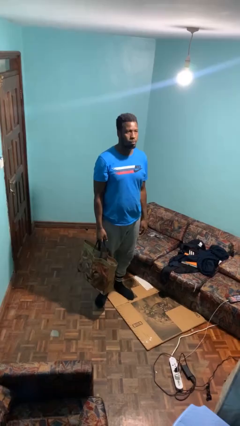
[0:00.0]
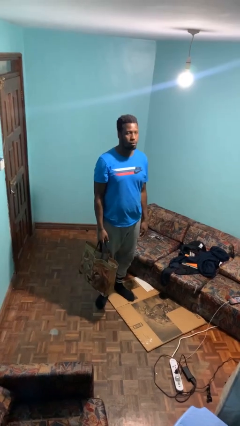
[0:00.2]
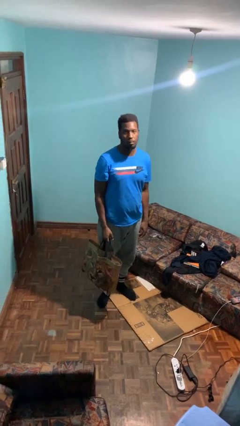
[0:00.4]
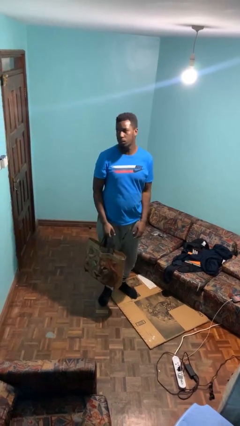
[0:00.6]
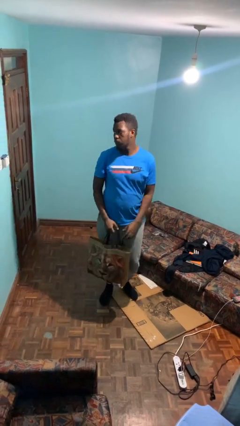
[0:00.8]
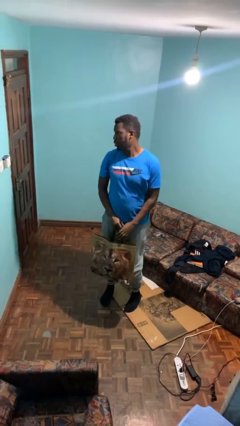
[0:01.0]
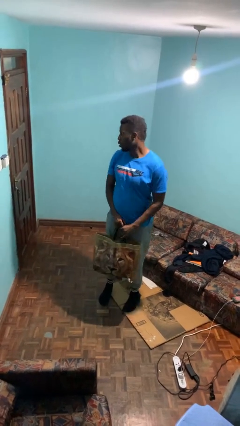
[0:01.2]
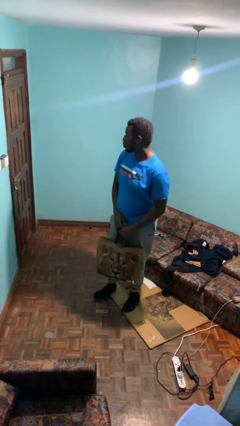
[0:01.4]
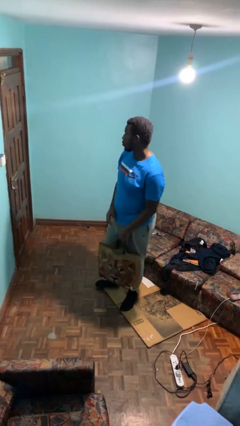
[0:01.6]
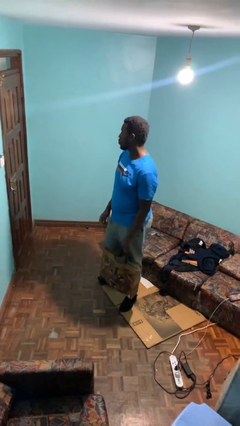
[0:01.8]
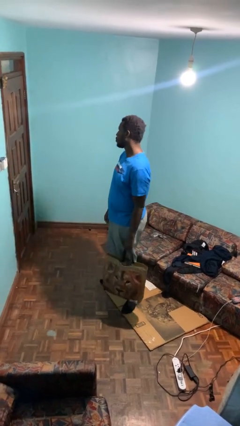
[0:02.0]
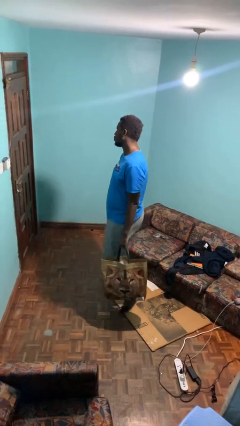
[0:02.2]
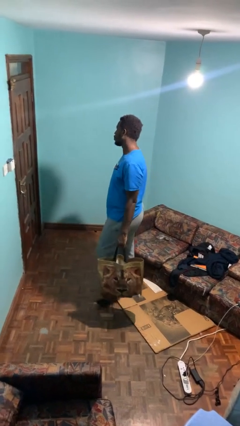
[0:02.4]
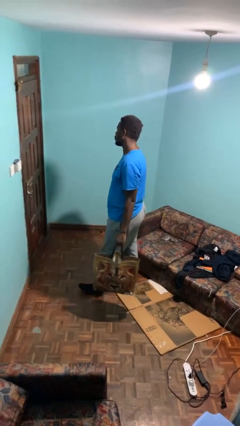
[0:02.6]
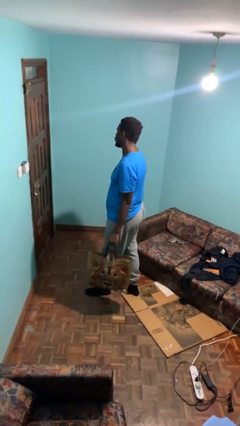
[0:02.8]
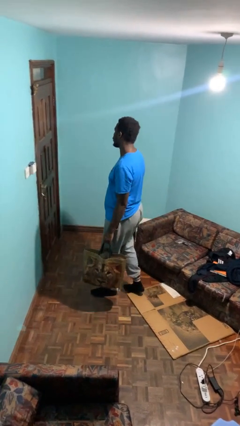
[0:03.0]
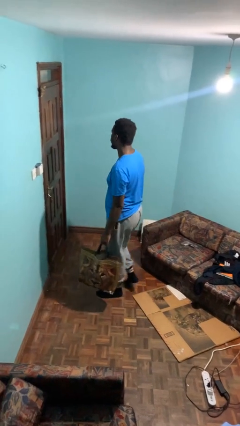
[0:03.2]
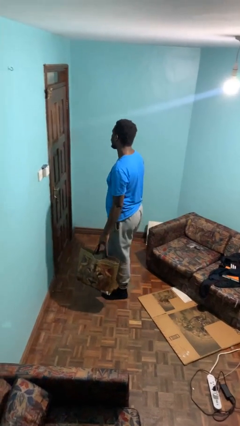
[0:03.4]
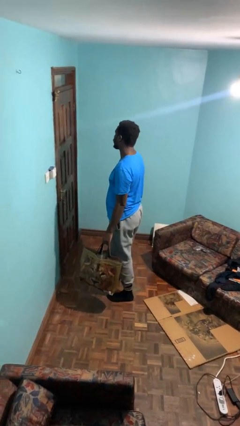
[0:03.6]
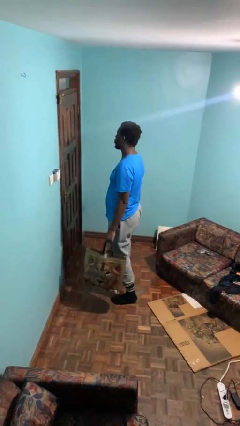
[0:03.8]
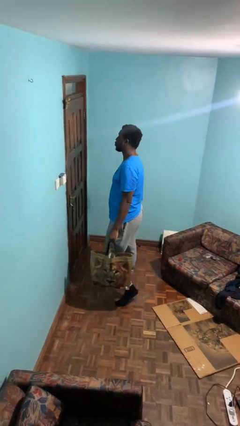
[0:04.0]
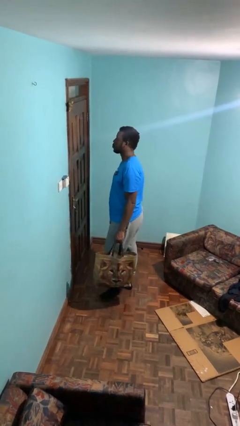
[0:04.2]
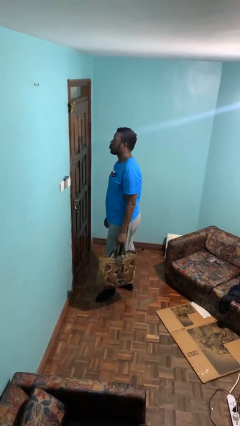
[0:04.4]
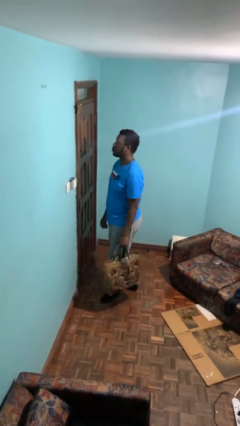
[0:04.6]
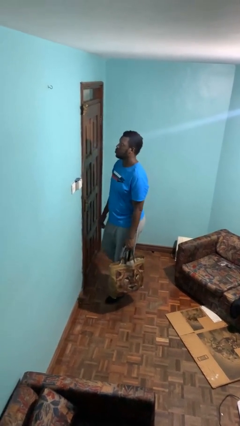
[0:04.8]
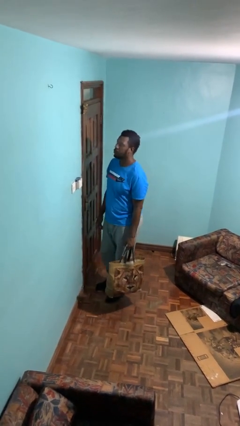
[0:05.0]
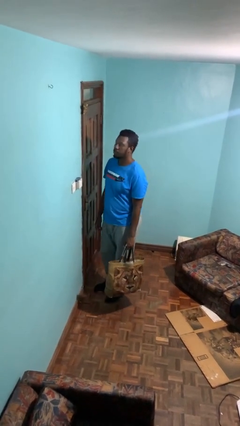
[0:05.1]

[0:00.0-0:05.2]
person carries groceries

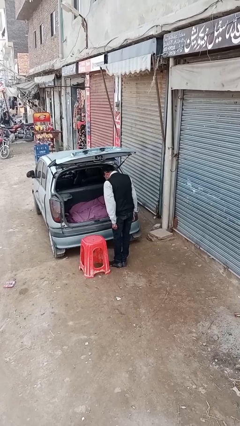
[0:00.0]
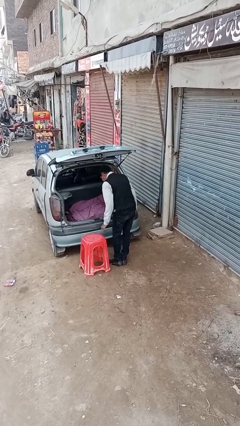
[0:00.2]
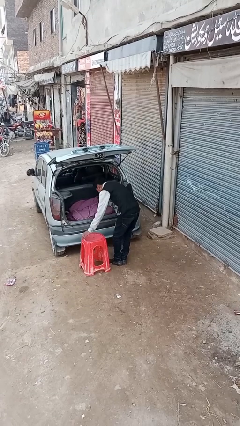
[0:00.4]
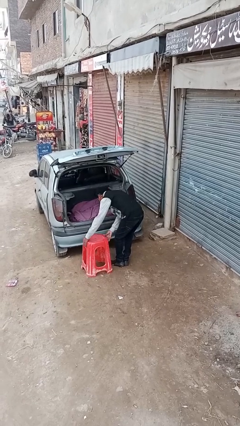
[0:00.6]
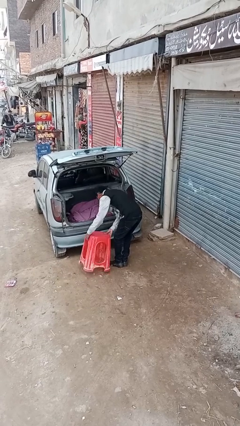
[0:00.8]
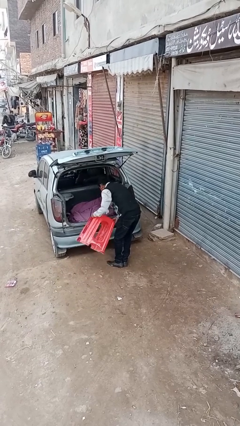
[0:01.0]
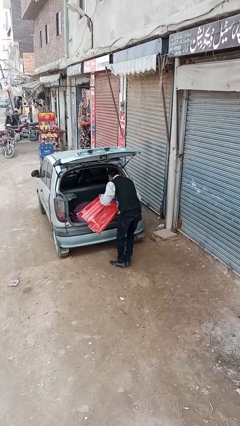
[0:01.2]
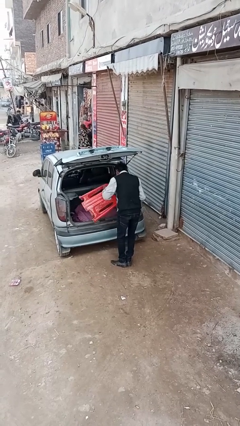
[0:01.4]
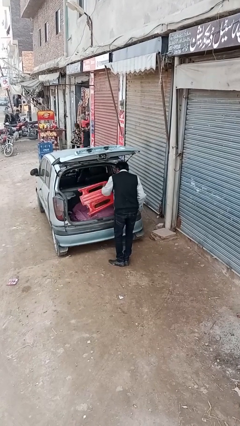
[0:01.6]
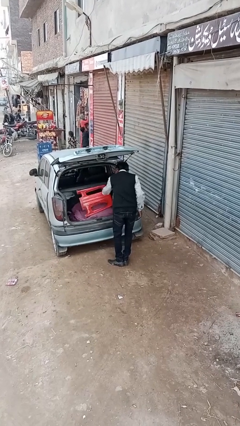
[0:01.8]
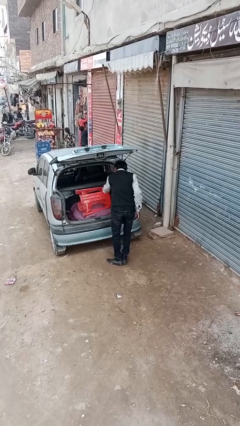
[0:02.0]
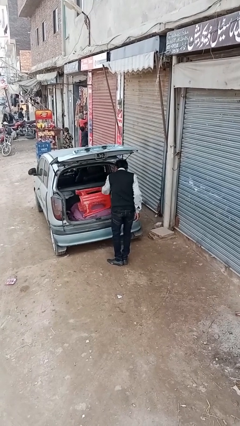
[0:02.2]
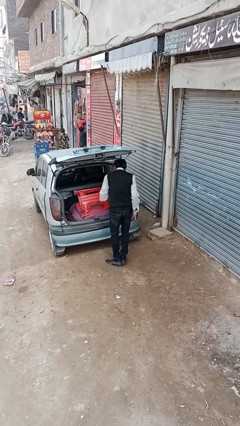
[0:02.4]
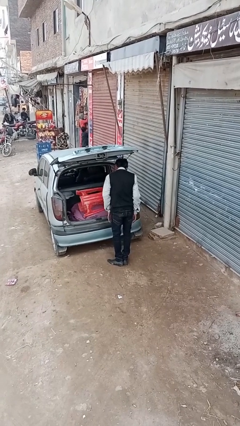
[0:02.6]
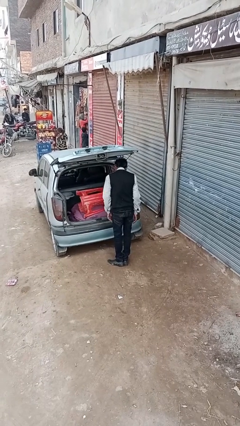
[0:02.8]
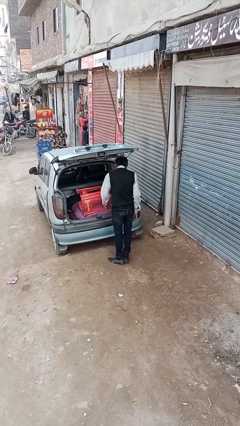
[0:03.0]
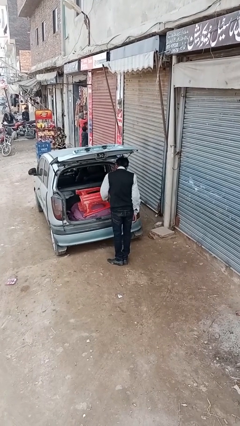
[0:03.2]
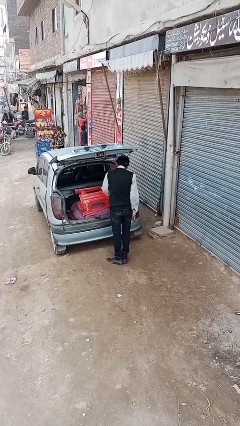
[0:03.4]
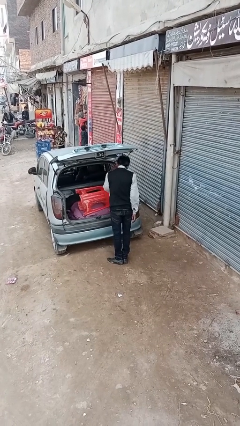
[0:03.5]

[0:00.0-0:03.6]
person loads car

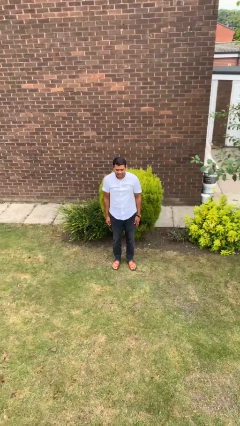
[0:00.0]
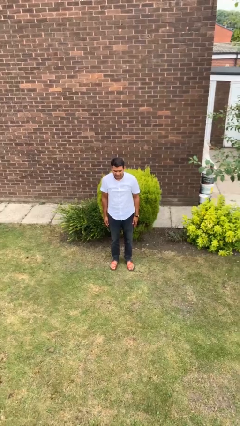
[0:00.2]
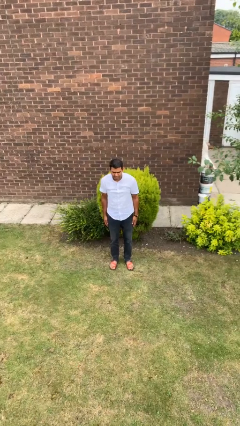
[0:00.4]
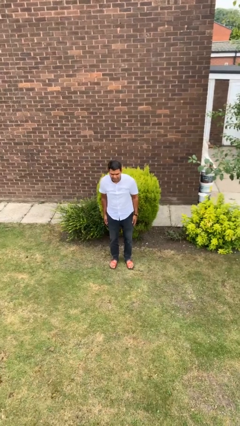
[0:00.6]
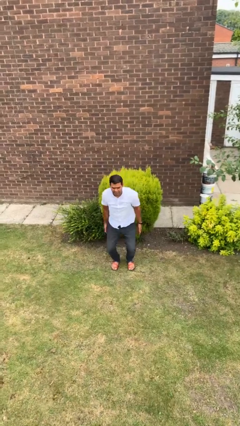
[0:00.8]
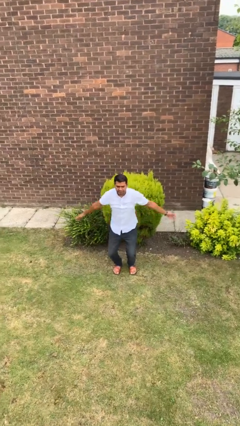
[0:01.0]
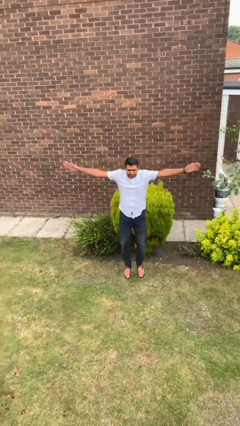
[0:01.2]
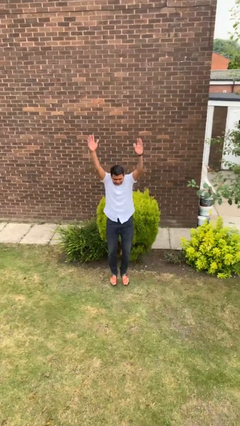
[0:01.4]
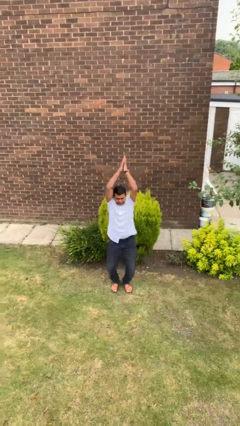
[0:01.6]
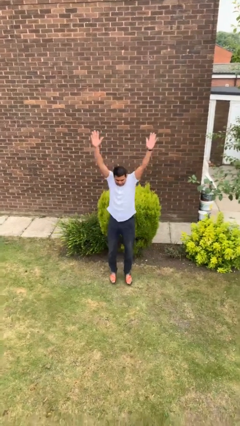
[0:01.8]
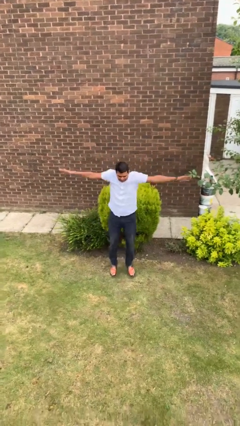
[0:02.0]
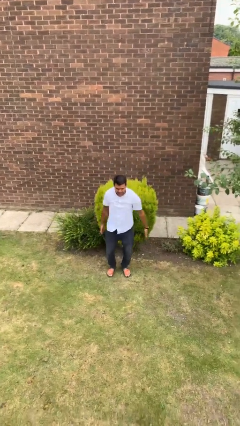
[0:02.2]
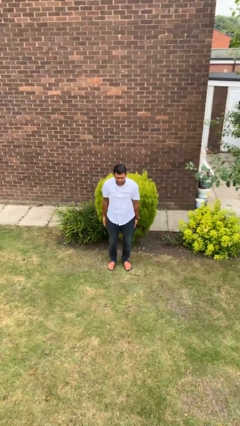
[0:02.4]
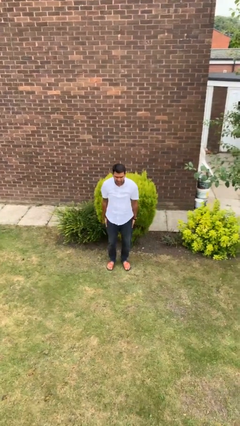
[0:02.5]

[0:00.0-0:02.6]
person exercises with jumping jacks

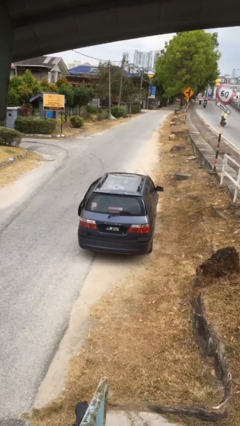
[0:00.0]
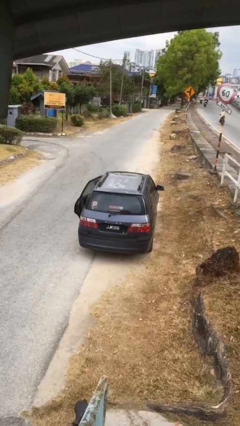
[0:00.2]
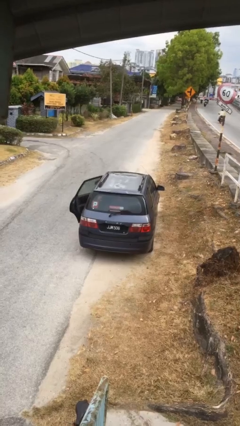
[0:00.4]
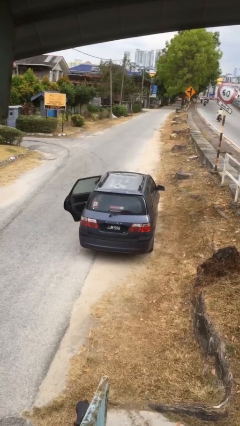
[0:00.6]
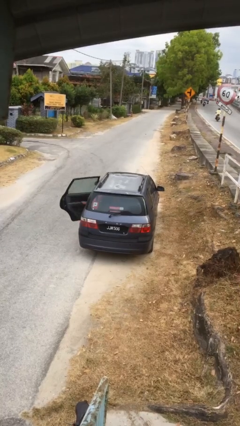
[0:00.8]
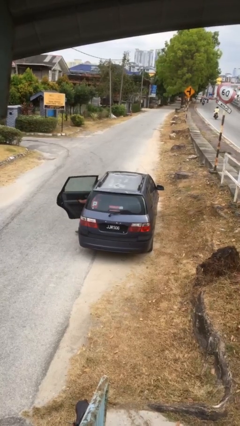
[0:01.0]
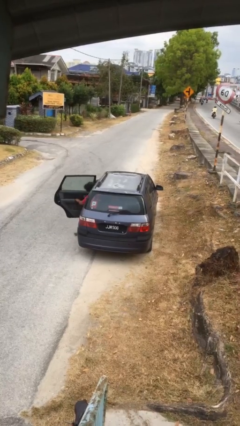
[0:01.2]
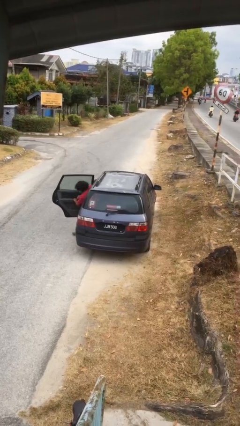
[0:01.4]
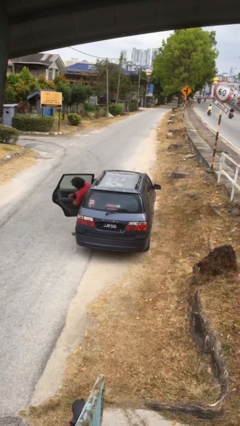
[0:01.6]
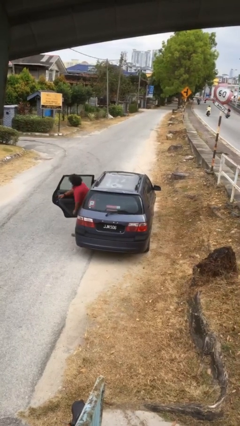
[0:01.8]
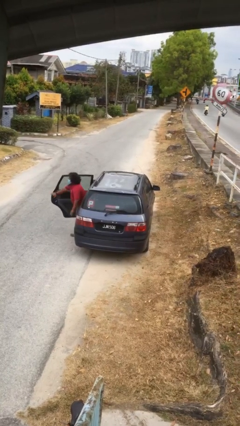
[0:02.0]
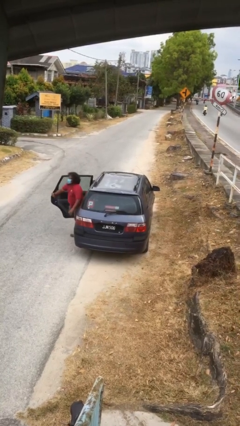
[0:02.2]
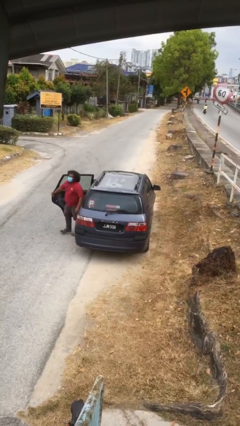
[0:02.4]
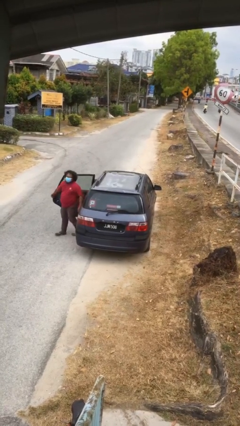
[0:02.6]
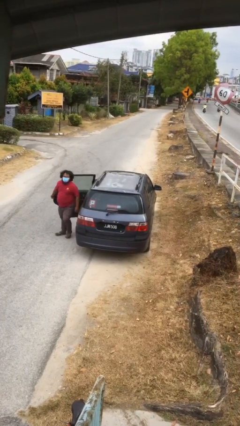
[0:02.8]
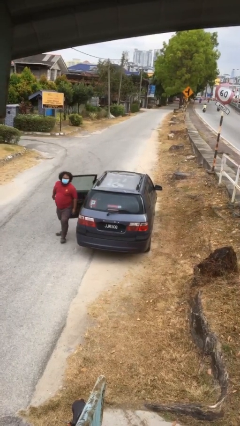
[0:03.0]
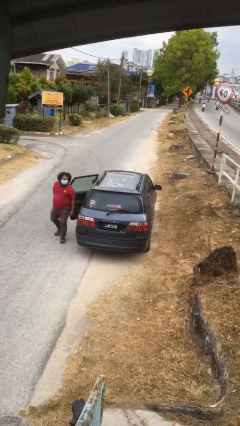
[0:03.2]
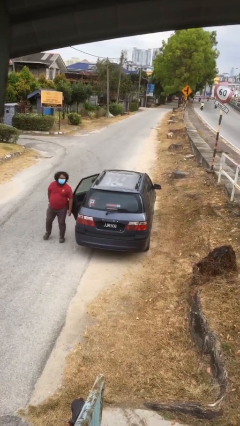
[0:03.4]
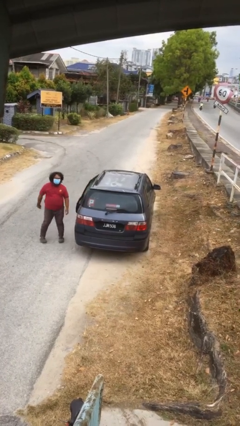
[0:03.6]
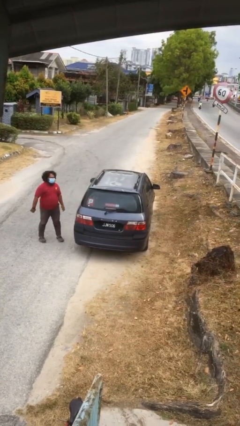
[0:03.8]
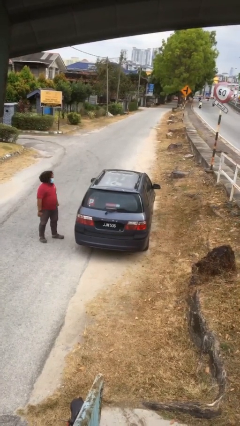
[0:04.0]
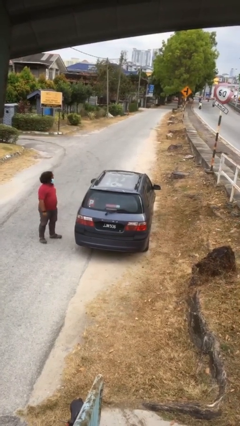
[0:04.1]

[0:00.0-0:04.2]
car drops off person

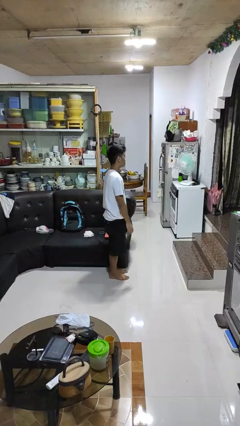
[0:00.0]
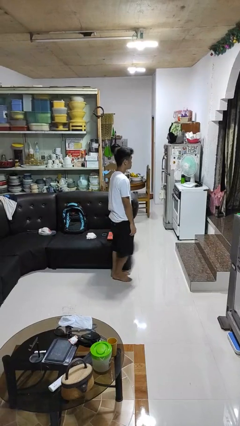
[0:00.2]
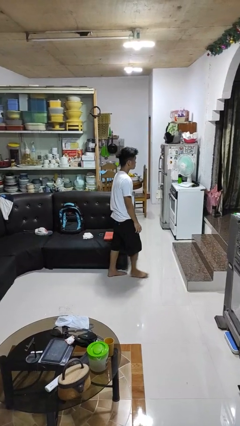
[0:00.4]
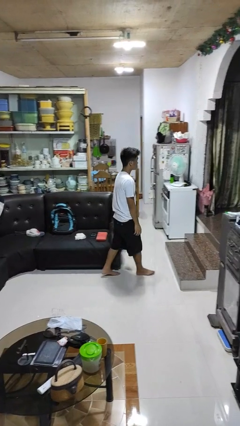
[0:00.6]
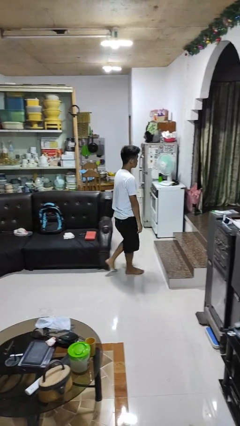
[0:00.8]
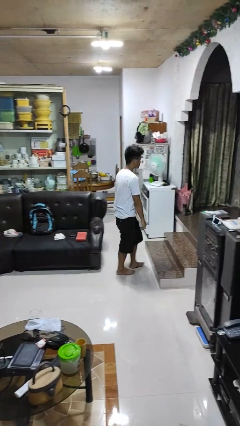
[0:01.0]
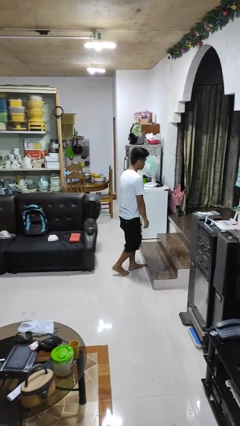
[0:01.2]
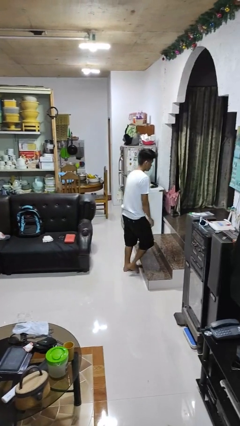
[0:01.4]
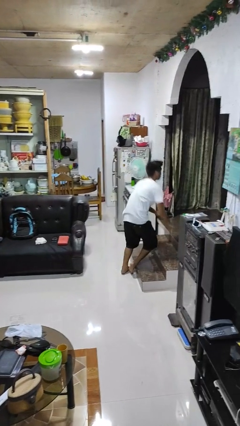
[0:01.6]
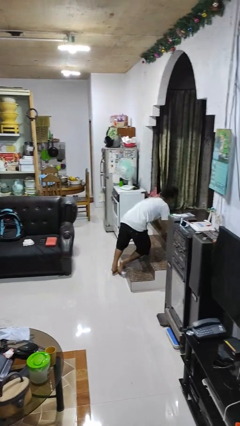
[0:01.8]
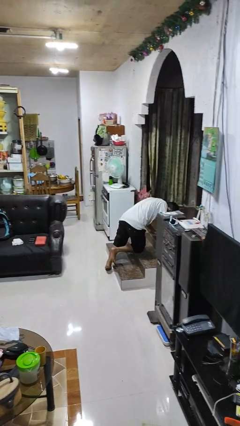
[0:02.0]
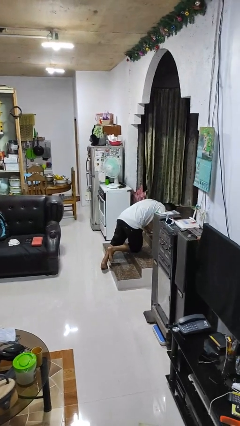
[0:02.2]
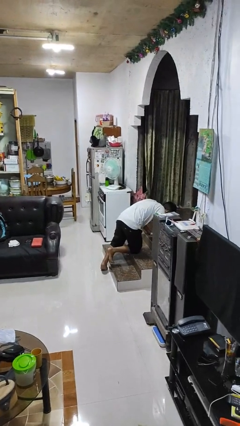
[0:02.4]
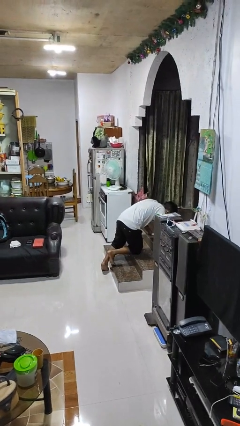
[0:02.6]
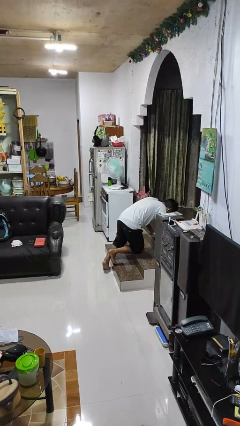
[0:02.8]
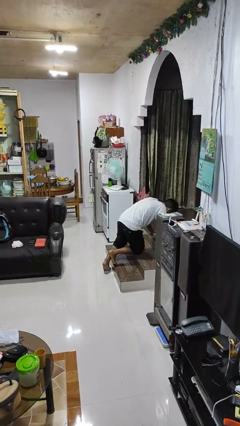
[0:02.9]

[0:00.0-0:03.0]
person trips on object on floor
